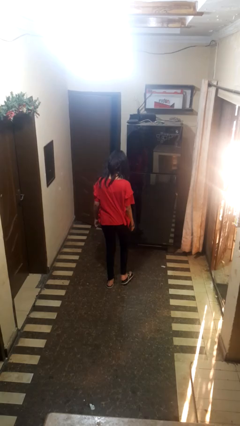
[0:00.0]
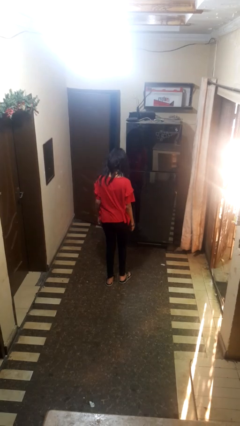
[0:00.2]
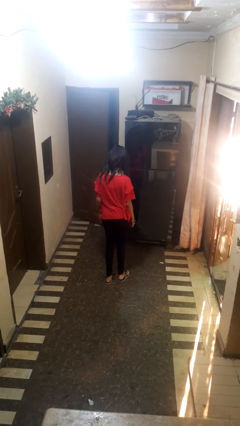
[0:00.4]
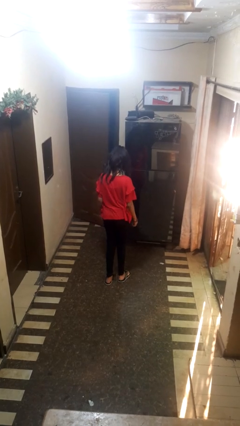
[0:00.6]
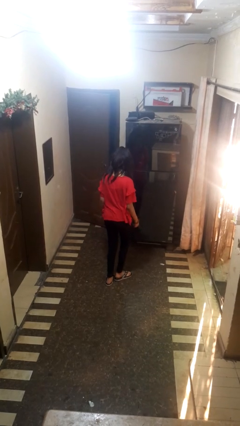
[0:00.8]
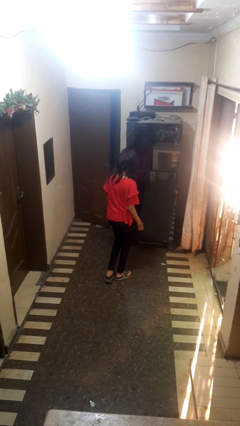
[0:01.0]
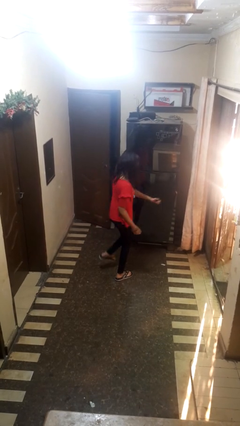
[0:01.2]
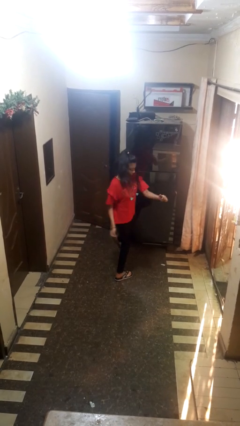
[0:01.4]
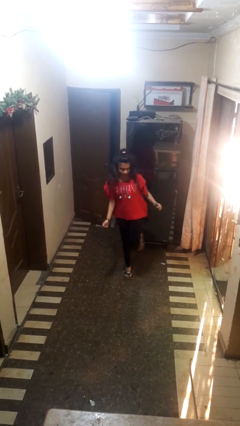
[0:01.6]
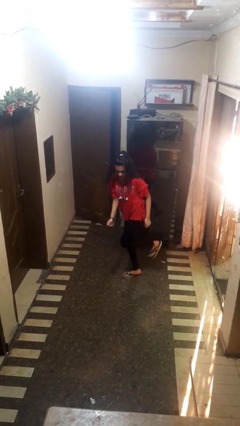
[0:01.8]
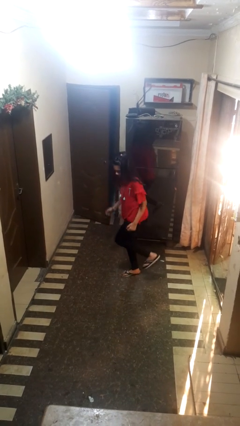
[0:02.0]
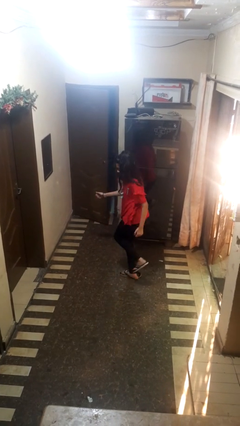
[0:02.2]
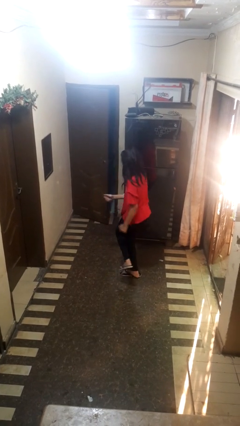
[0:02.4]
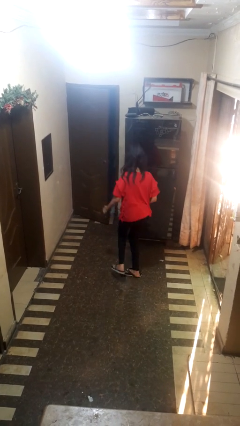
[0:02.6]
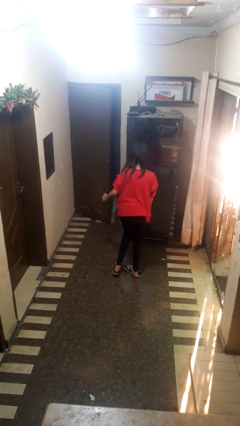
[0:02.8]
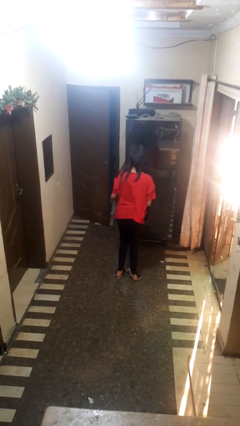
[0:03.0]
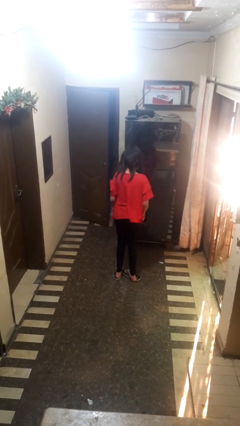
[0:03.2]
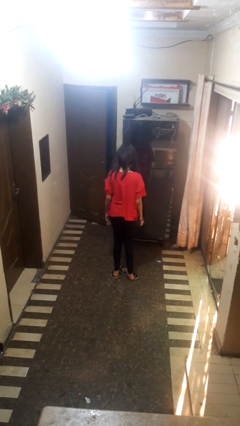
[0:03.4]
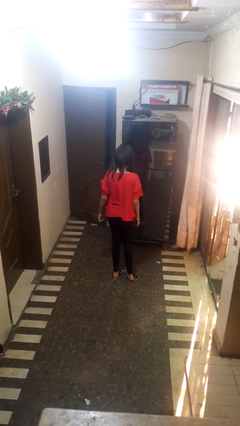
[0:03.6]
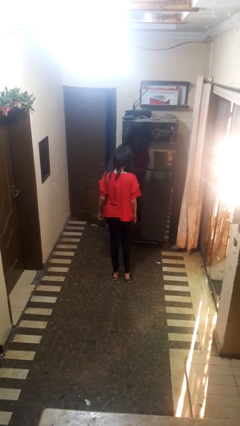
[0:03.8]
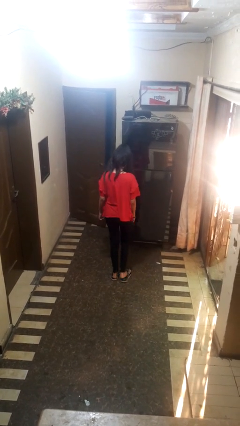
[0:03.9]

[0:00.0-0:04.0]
person twirls

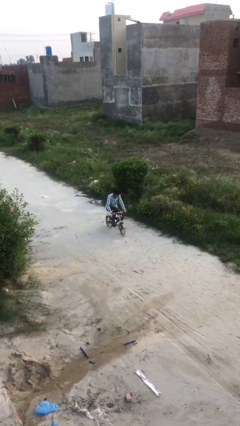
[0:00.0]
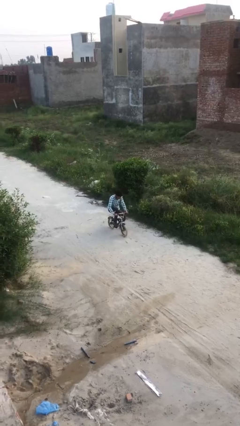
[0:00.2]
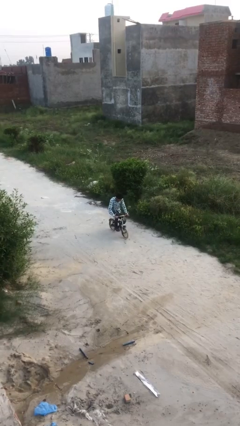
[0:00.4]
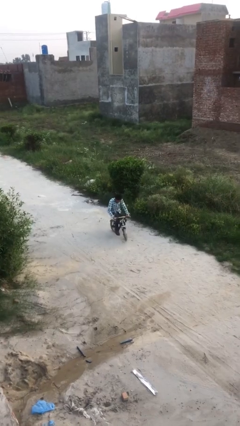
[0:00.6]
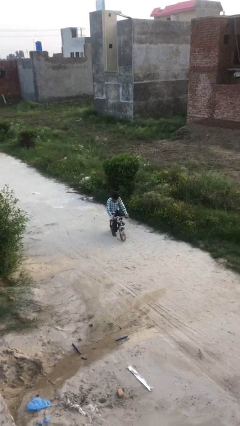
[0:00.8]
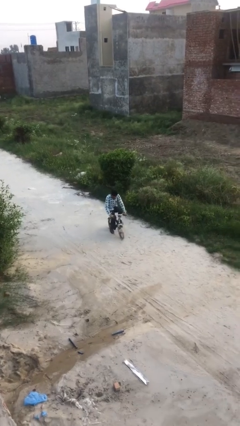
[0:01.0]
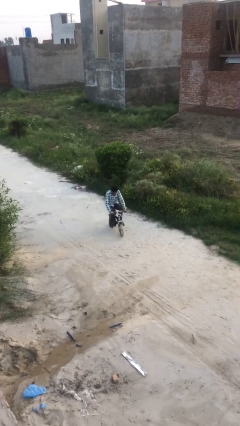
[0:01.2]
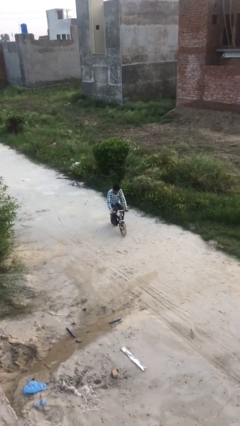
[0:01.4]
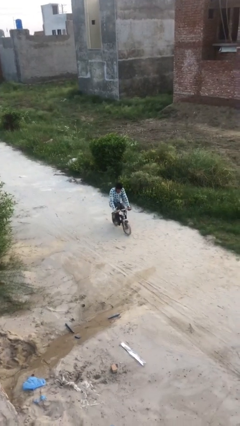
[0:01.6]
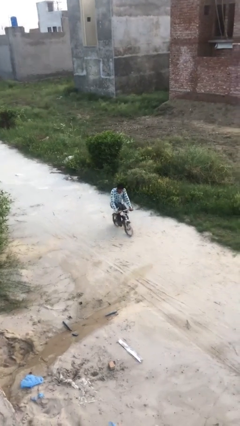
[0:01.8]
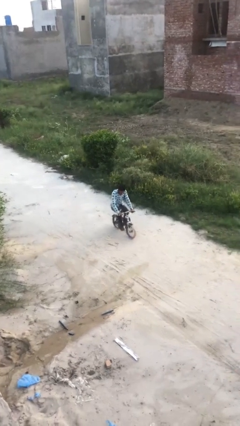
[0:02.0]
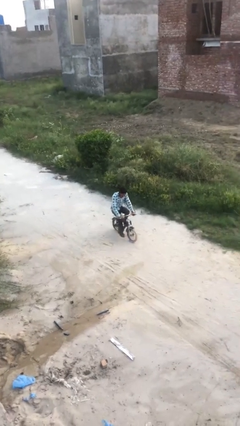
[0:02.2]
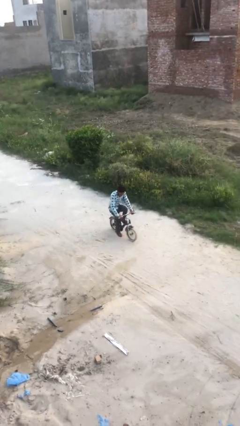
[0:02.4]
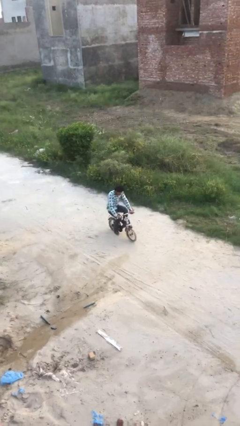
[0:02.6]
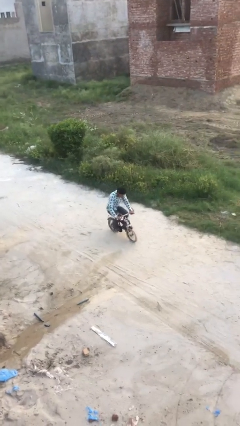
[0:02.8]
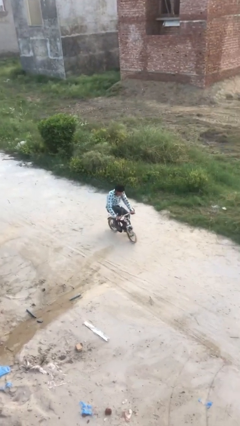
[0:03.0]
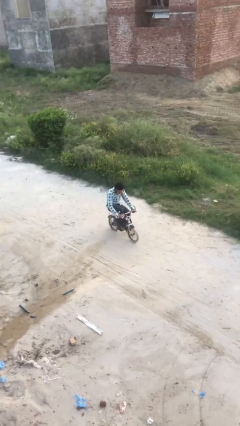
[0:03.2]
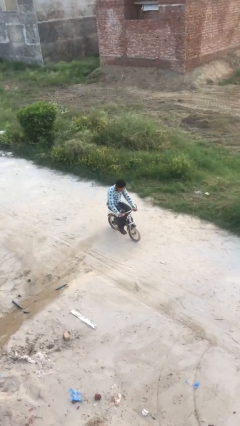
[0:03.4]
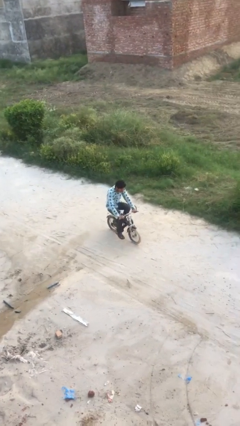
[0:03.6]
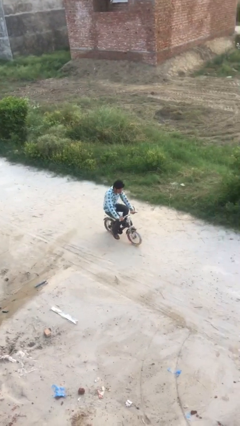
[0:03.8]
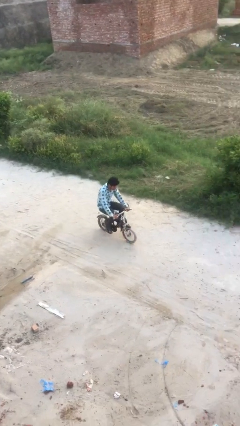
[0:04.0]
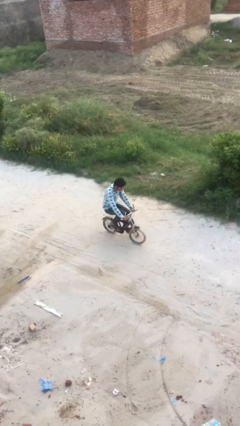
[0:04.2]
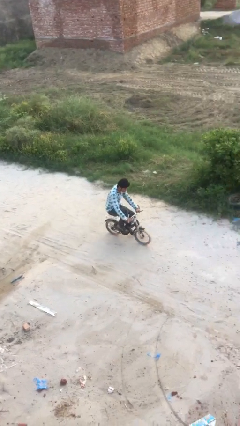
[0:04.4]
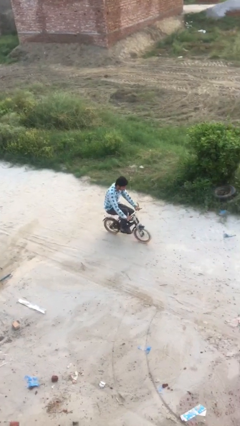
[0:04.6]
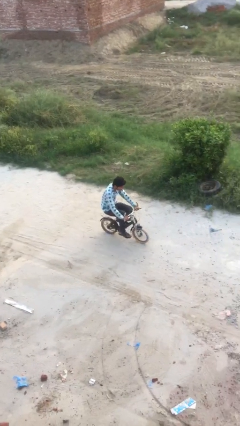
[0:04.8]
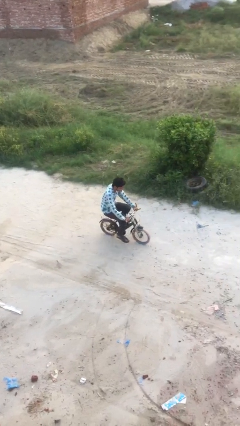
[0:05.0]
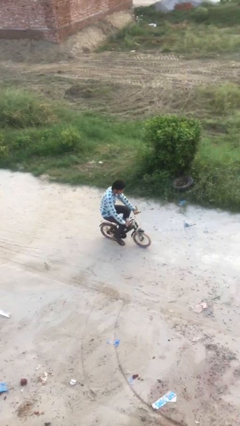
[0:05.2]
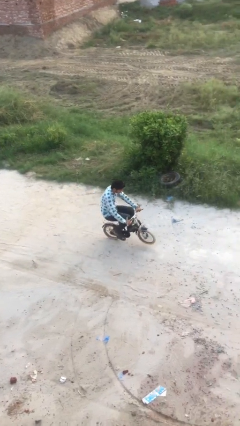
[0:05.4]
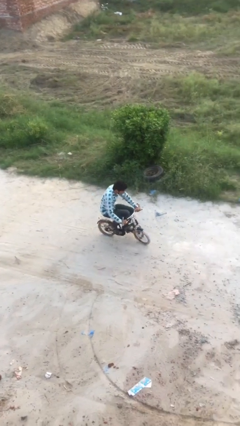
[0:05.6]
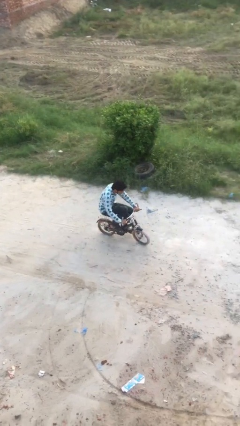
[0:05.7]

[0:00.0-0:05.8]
person rides bicycle

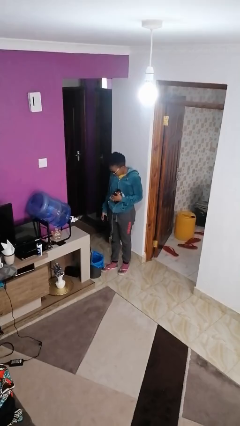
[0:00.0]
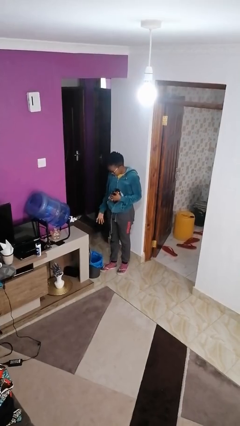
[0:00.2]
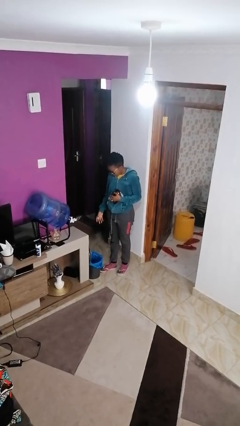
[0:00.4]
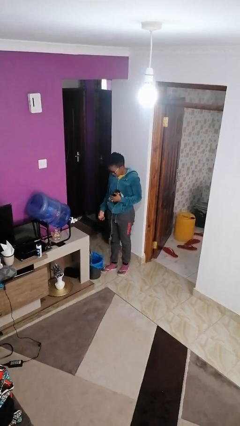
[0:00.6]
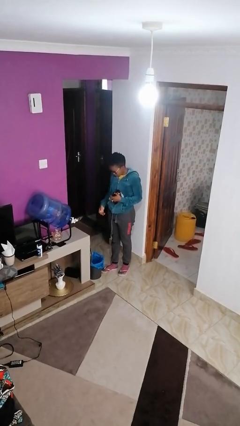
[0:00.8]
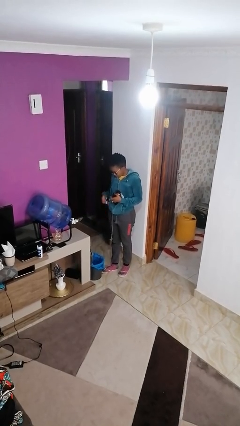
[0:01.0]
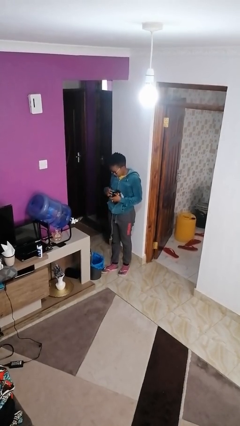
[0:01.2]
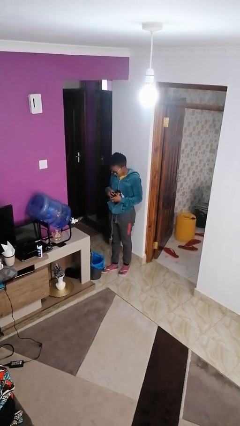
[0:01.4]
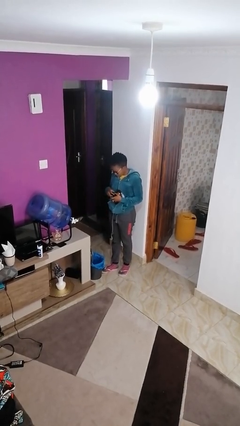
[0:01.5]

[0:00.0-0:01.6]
person discards trash

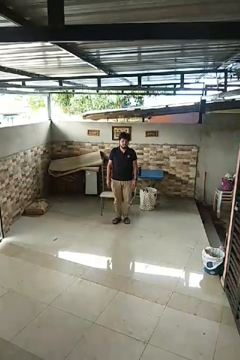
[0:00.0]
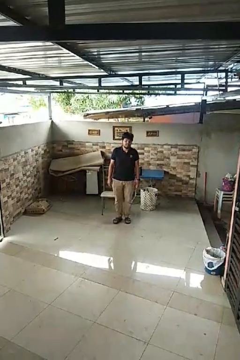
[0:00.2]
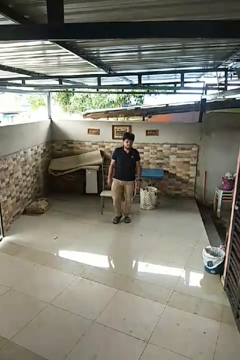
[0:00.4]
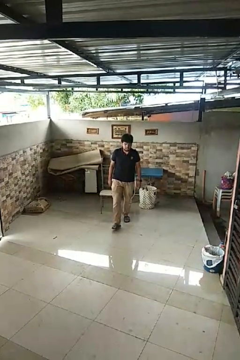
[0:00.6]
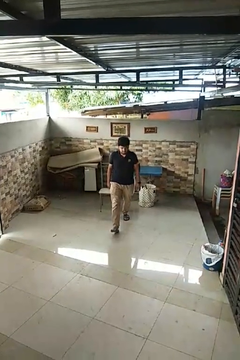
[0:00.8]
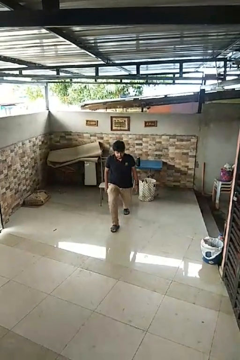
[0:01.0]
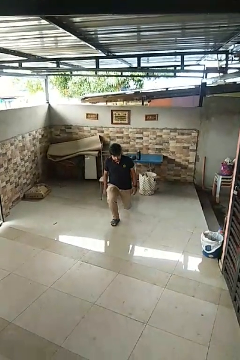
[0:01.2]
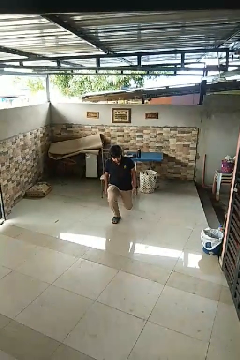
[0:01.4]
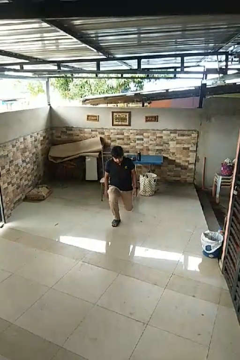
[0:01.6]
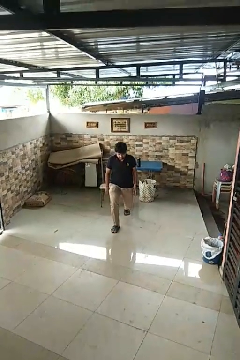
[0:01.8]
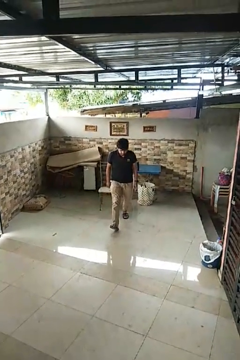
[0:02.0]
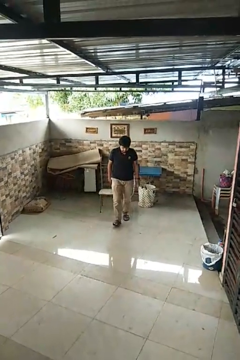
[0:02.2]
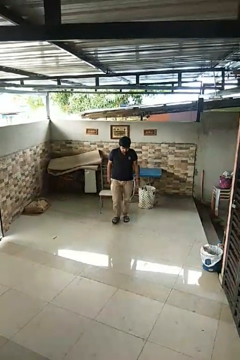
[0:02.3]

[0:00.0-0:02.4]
person exercises with lunges

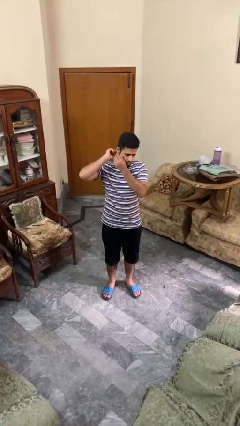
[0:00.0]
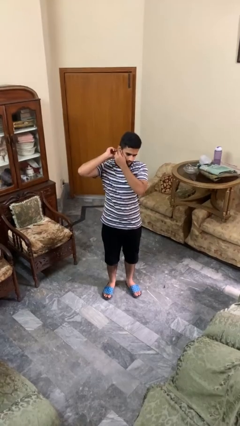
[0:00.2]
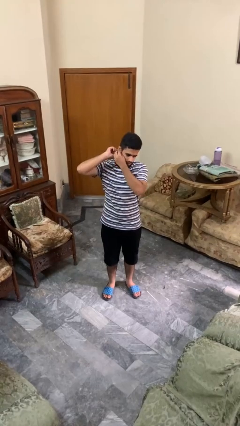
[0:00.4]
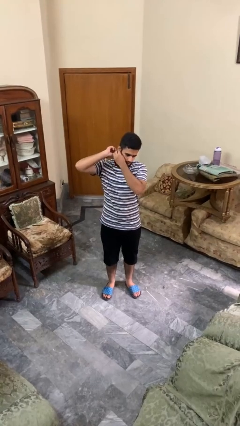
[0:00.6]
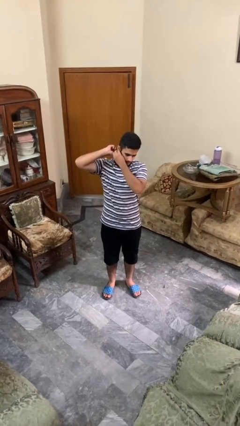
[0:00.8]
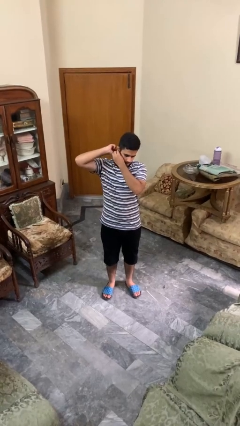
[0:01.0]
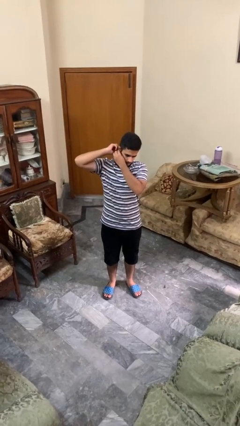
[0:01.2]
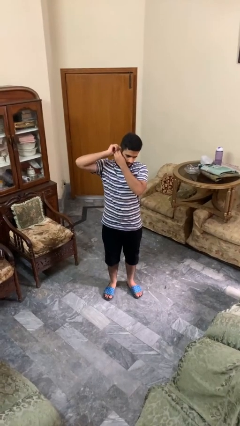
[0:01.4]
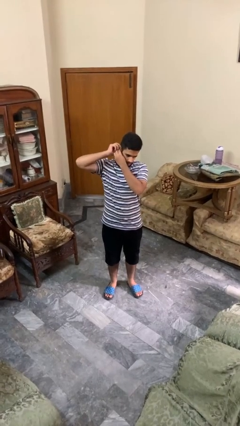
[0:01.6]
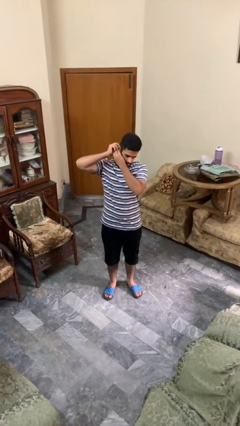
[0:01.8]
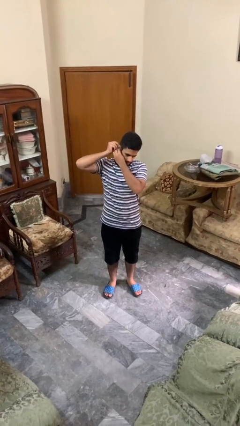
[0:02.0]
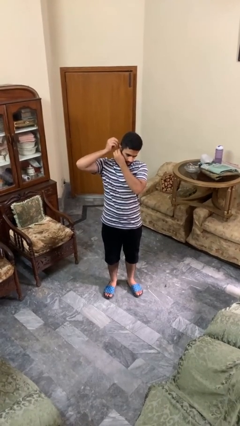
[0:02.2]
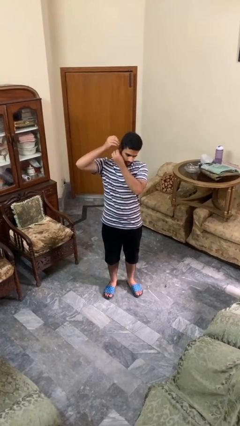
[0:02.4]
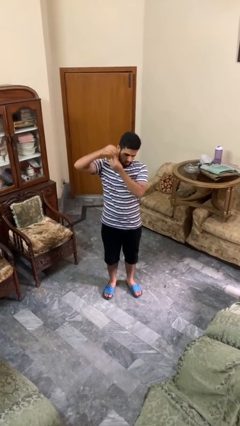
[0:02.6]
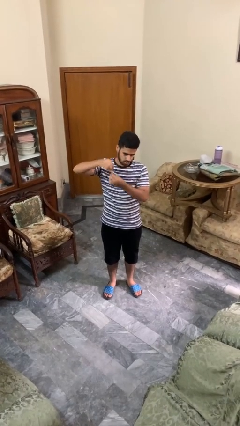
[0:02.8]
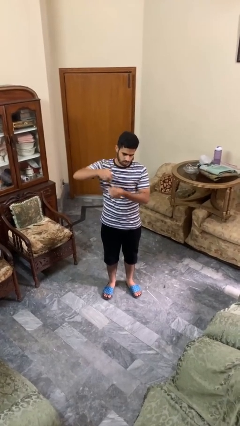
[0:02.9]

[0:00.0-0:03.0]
person takes off earrings

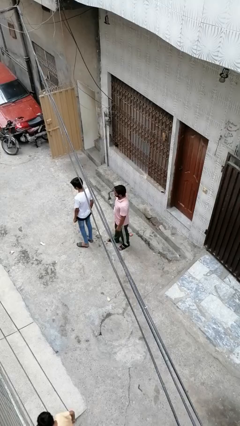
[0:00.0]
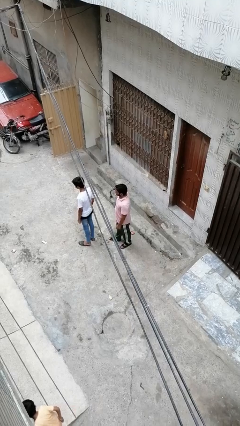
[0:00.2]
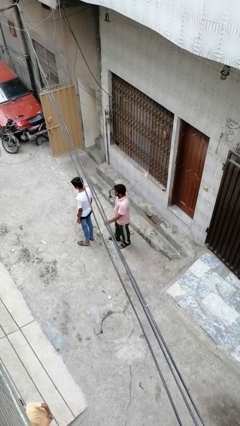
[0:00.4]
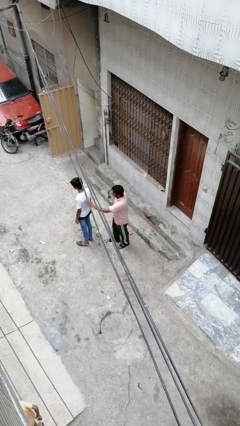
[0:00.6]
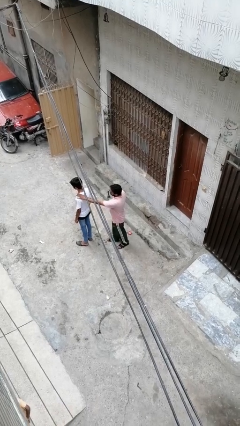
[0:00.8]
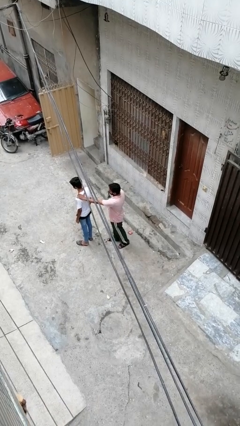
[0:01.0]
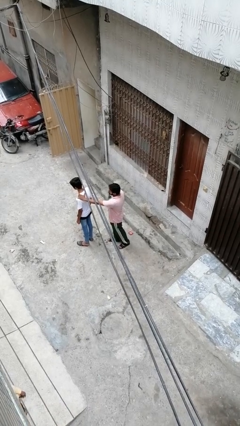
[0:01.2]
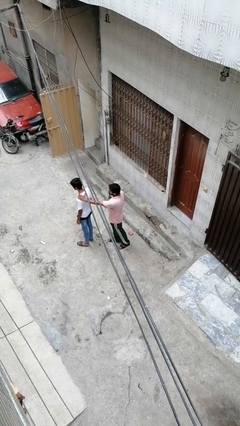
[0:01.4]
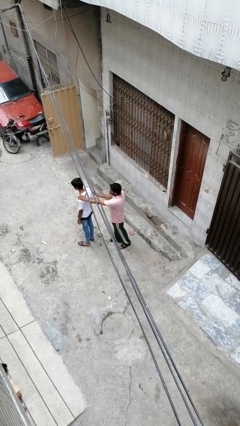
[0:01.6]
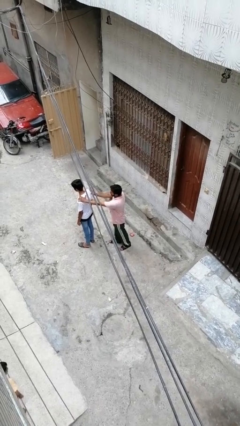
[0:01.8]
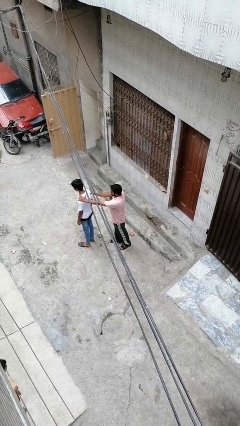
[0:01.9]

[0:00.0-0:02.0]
person grabs person by shoulder
